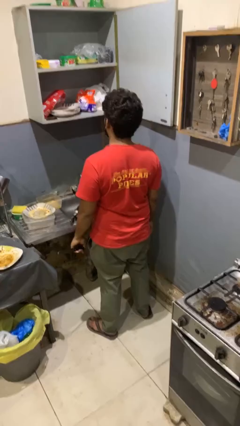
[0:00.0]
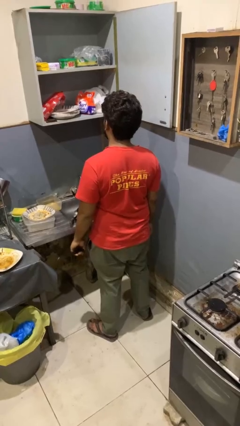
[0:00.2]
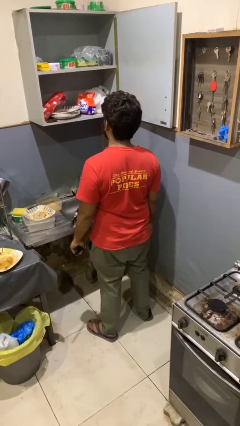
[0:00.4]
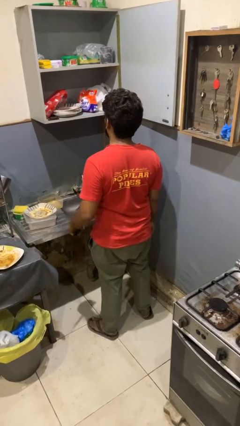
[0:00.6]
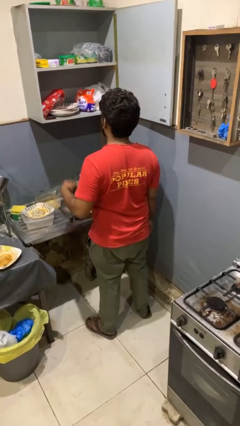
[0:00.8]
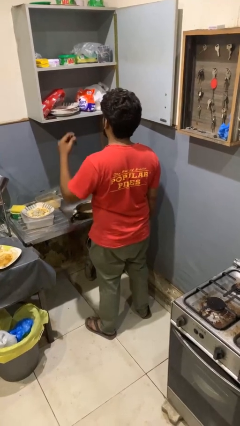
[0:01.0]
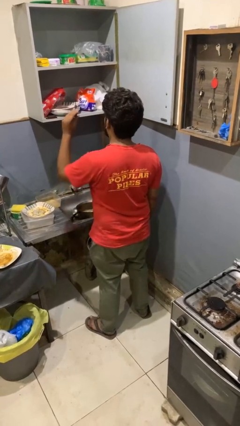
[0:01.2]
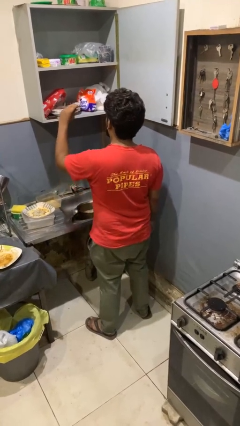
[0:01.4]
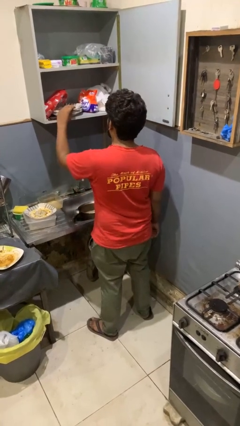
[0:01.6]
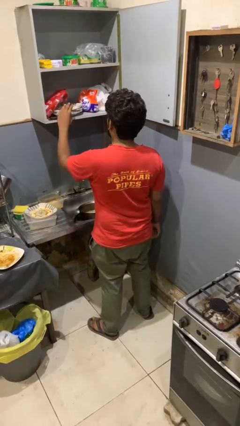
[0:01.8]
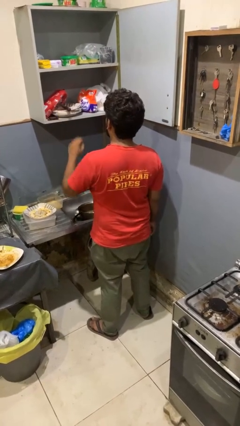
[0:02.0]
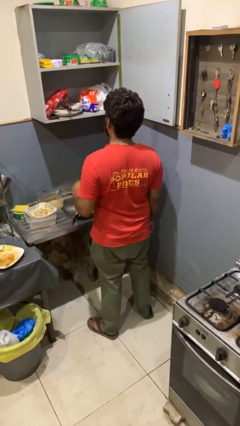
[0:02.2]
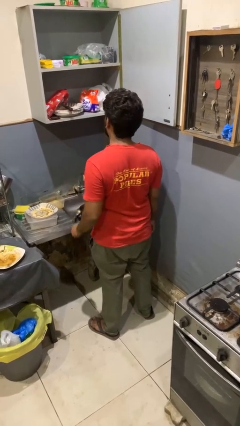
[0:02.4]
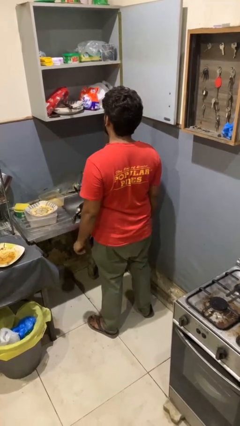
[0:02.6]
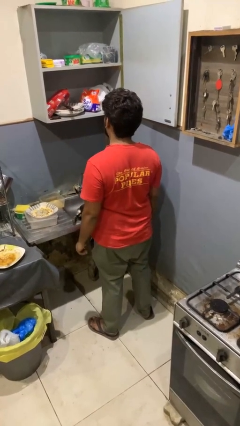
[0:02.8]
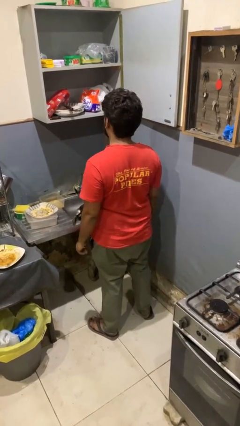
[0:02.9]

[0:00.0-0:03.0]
person puts object in cabinet

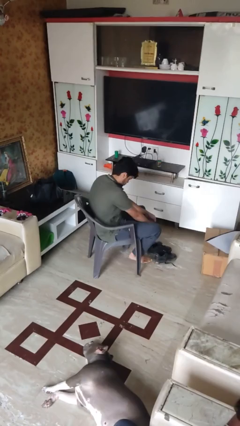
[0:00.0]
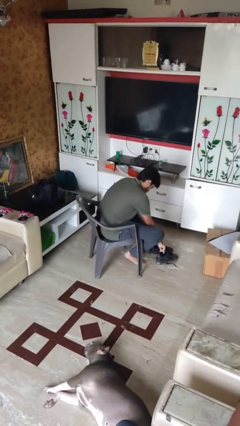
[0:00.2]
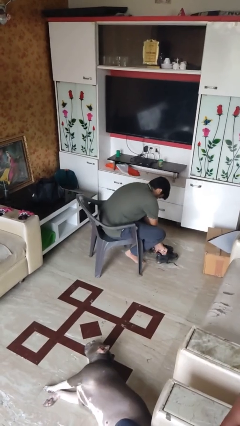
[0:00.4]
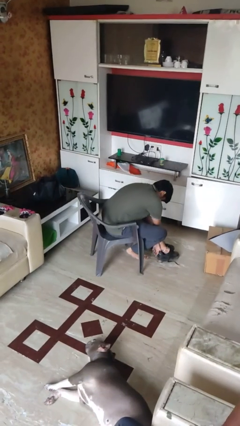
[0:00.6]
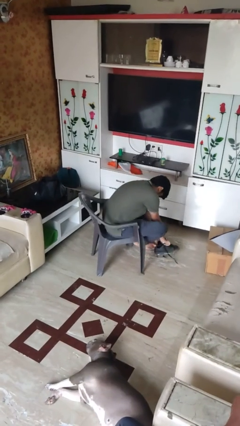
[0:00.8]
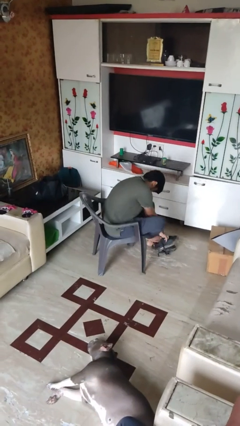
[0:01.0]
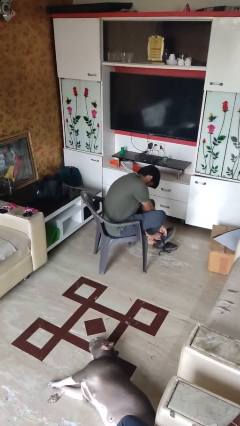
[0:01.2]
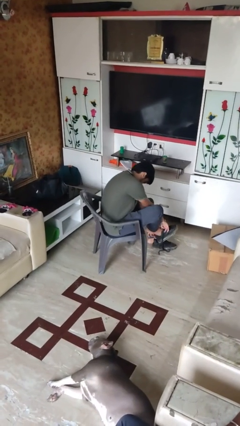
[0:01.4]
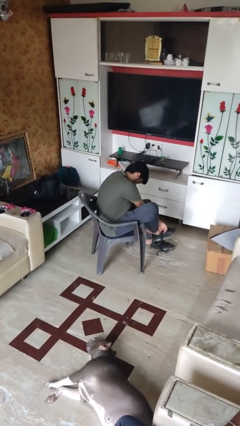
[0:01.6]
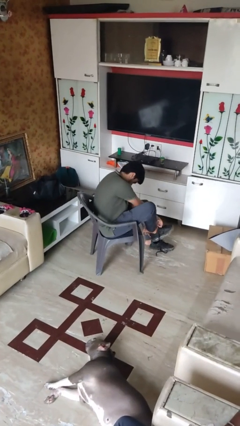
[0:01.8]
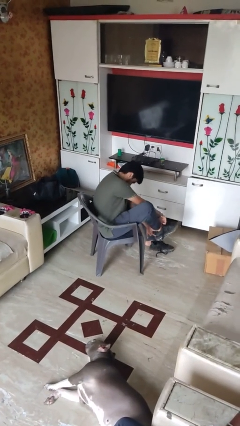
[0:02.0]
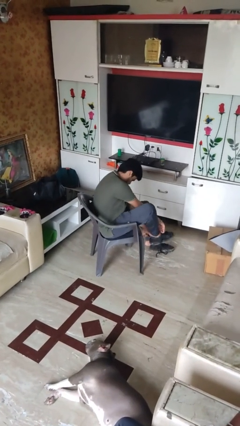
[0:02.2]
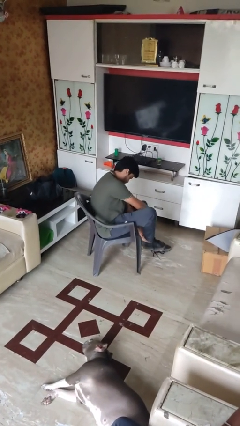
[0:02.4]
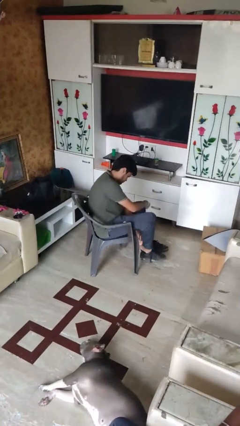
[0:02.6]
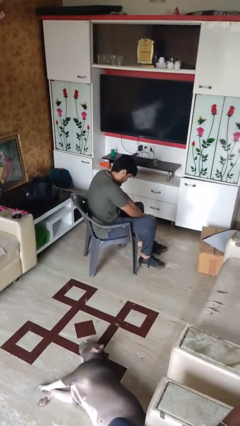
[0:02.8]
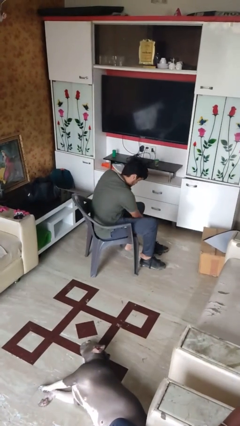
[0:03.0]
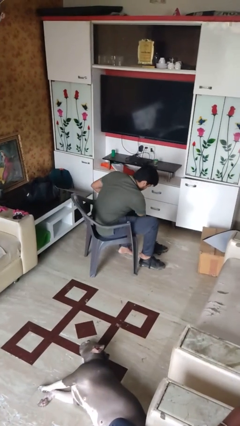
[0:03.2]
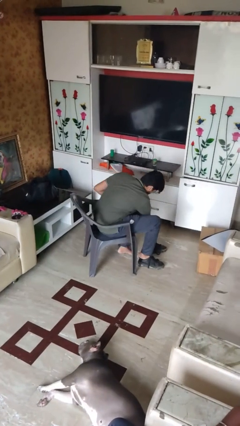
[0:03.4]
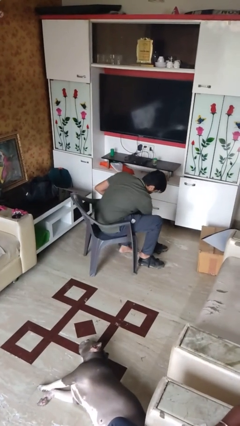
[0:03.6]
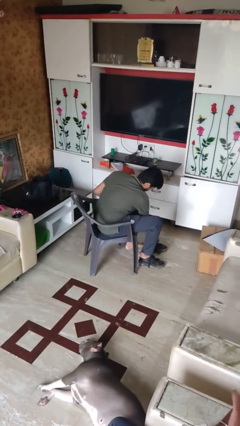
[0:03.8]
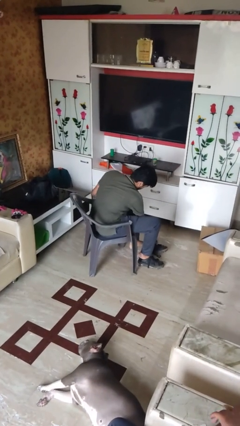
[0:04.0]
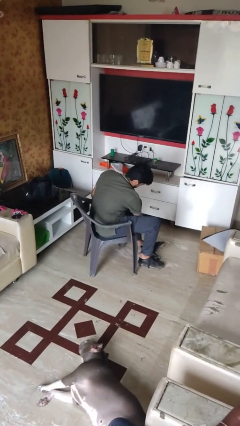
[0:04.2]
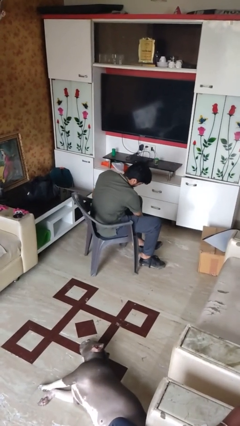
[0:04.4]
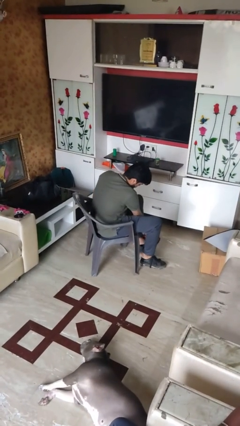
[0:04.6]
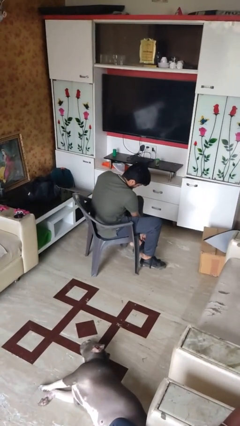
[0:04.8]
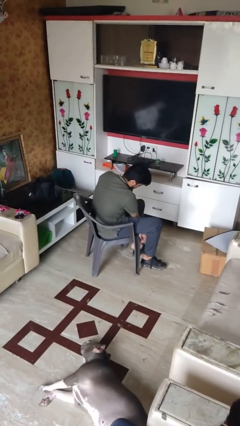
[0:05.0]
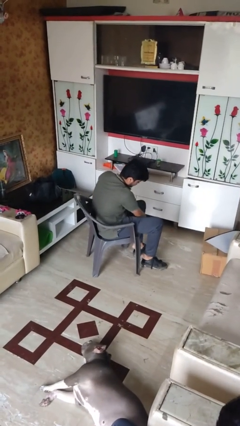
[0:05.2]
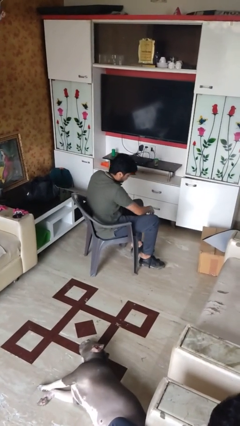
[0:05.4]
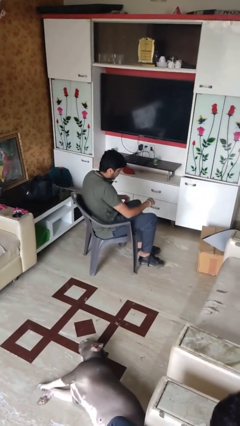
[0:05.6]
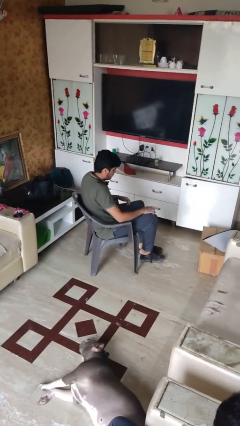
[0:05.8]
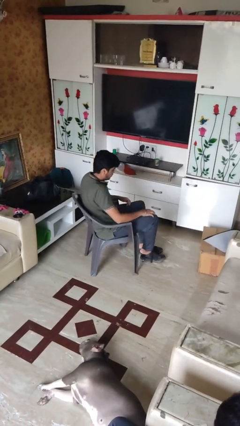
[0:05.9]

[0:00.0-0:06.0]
person puts on shoes

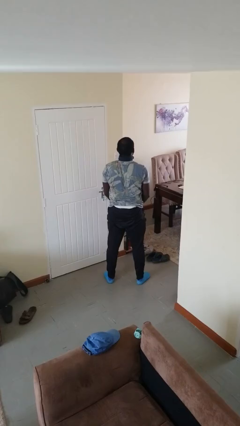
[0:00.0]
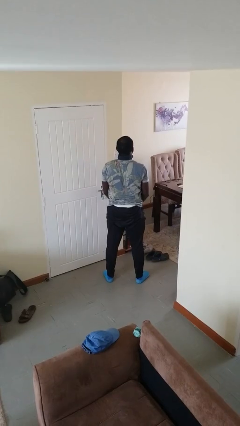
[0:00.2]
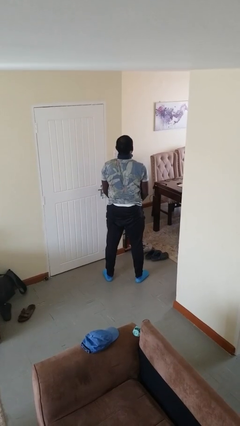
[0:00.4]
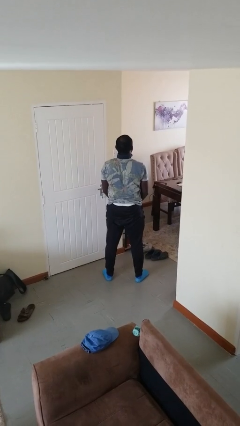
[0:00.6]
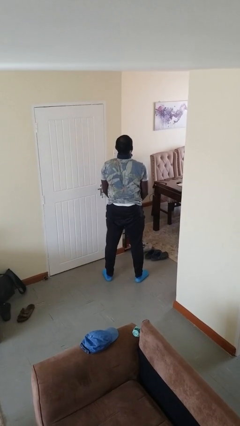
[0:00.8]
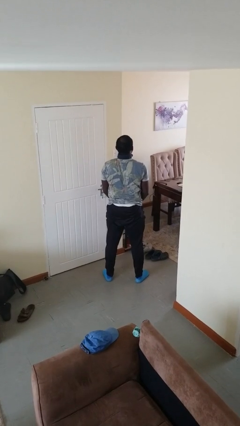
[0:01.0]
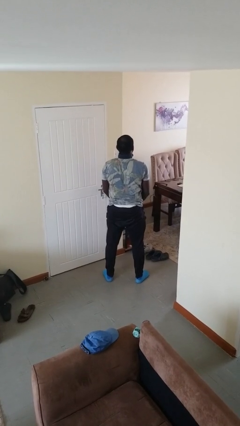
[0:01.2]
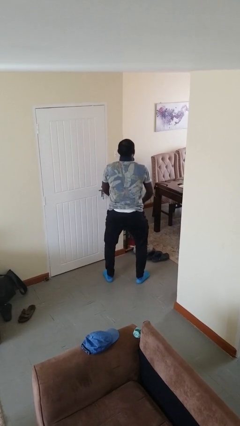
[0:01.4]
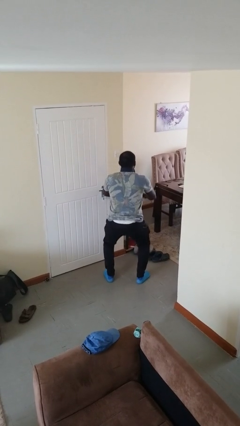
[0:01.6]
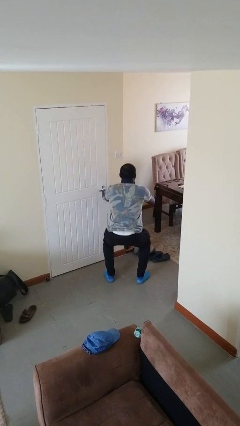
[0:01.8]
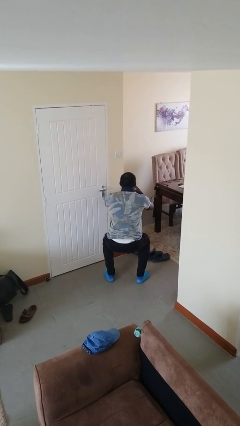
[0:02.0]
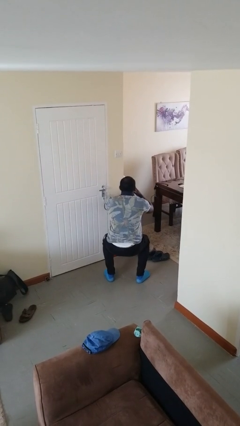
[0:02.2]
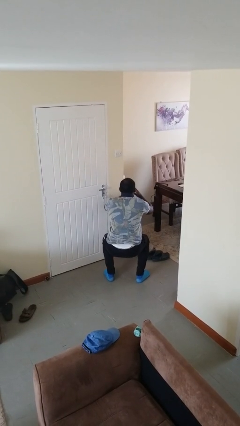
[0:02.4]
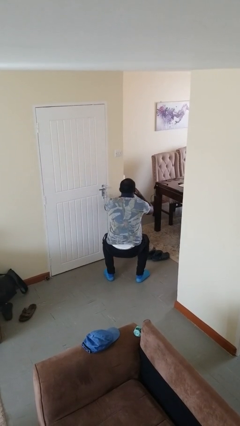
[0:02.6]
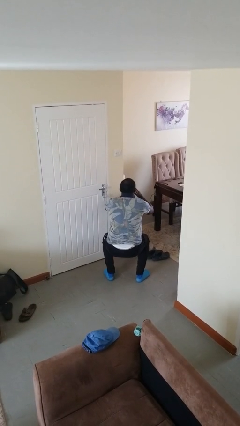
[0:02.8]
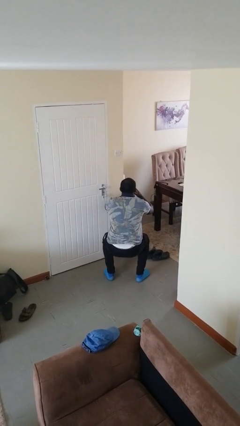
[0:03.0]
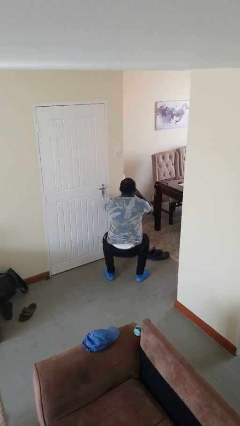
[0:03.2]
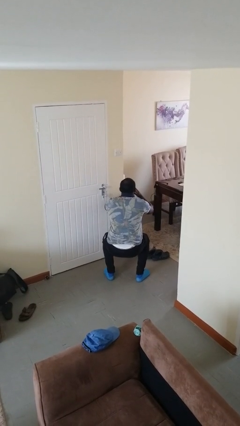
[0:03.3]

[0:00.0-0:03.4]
person squats

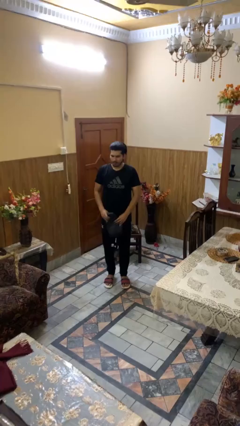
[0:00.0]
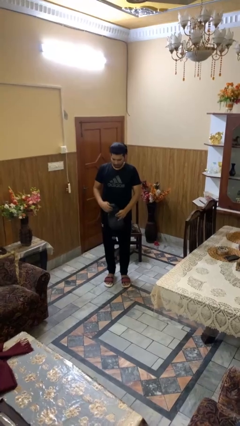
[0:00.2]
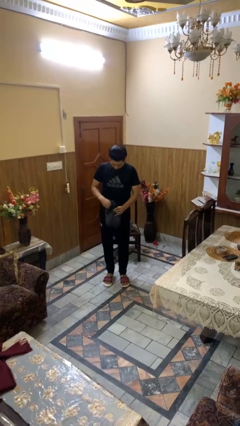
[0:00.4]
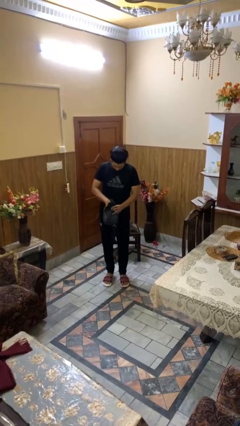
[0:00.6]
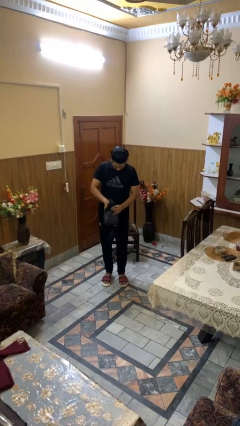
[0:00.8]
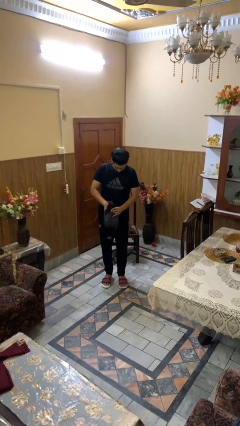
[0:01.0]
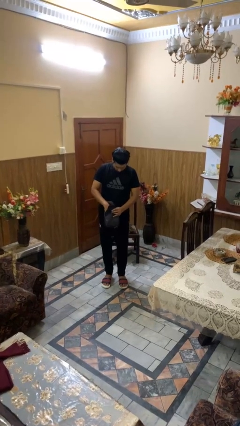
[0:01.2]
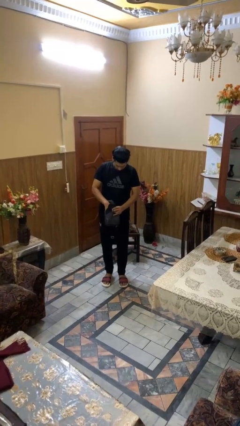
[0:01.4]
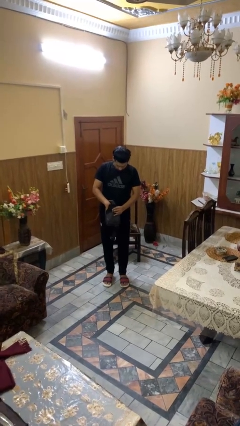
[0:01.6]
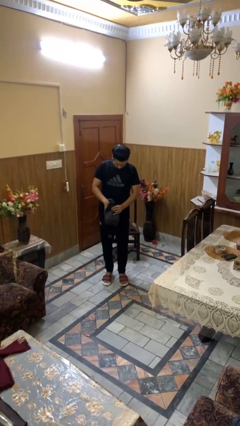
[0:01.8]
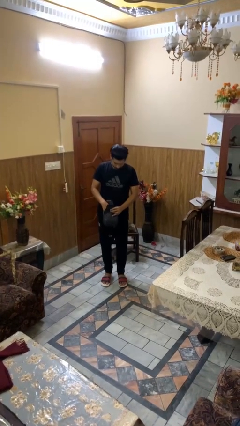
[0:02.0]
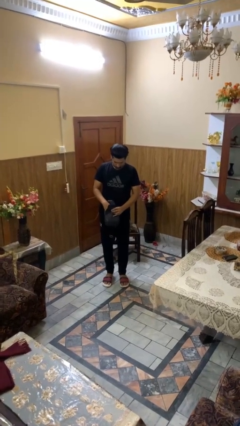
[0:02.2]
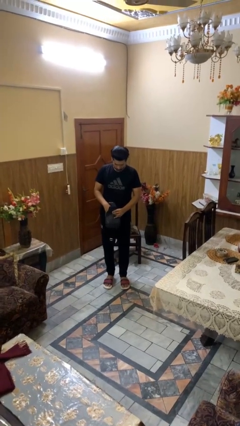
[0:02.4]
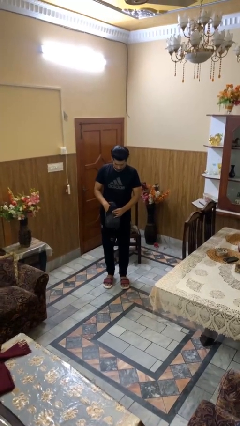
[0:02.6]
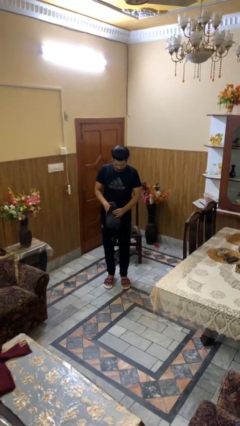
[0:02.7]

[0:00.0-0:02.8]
person searches in purse

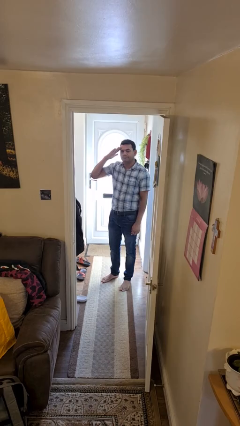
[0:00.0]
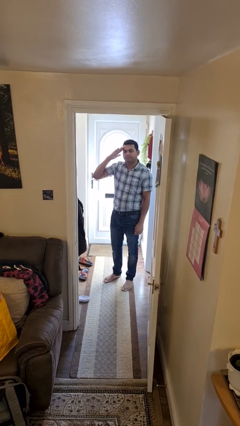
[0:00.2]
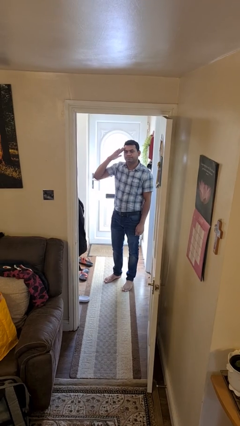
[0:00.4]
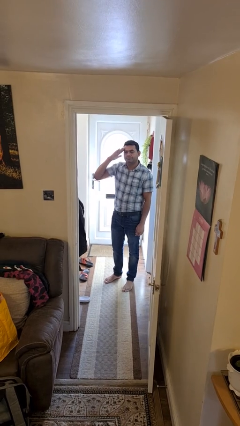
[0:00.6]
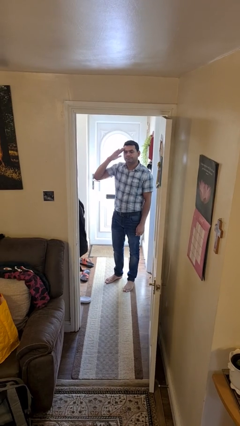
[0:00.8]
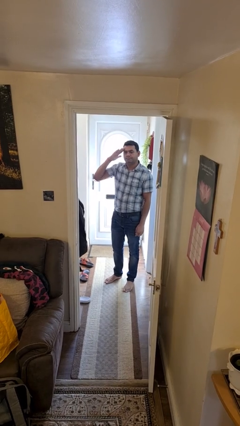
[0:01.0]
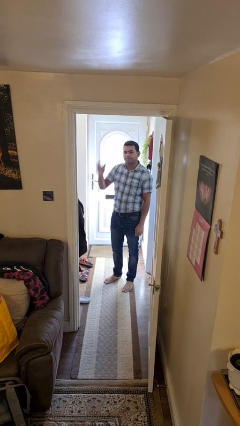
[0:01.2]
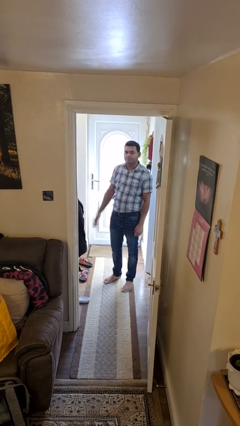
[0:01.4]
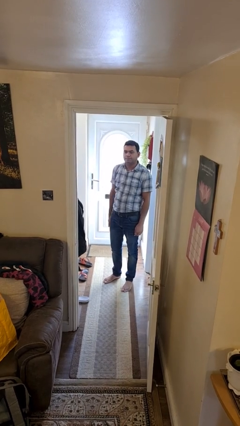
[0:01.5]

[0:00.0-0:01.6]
person salutes

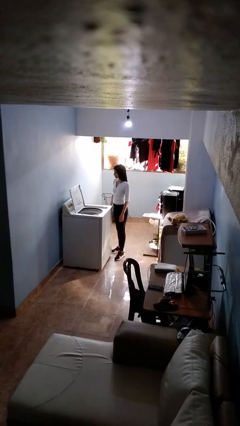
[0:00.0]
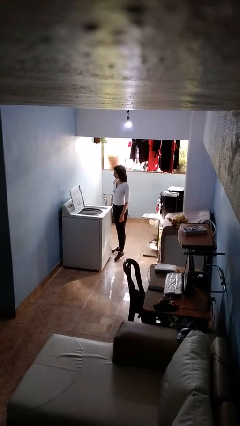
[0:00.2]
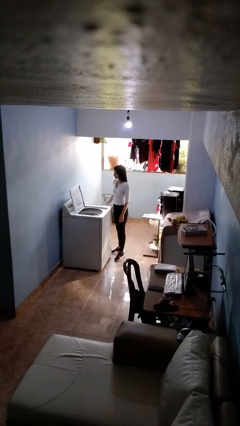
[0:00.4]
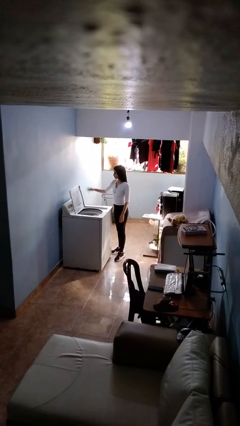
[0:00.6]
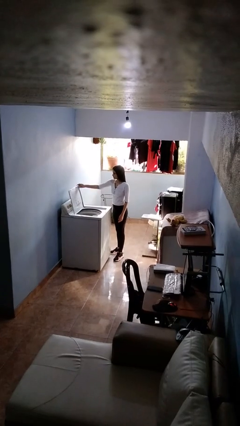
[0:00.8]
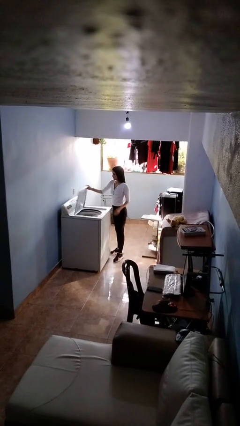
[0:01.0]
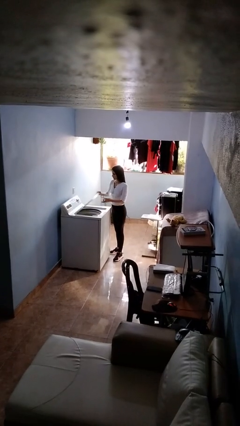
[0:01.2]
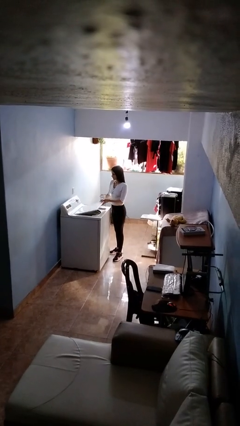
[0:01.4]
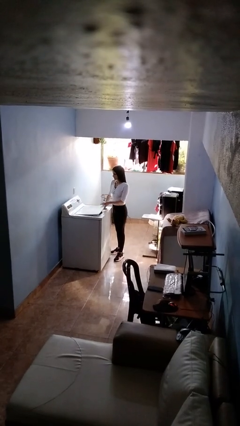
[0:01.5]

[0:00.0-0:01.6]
person closes clothes washer
